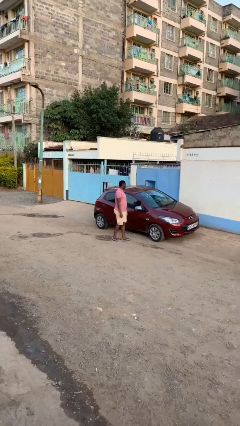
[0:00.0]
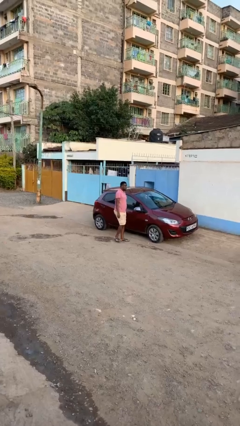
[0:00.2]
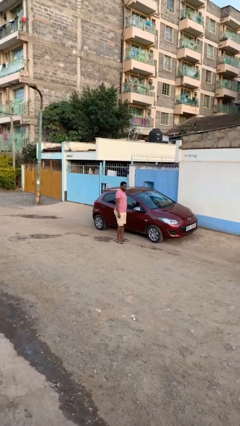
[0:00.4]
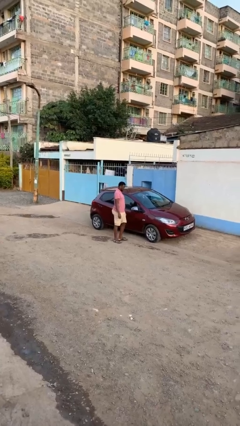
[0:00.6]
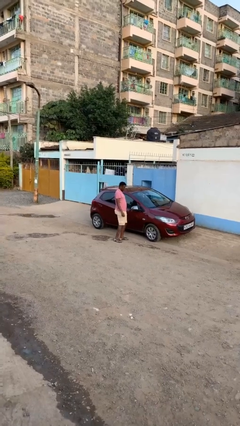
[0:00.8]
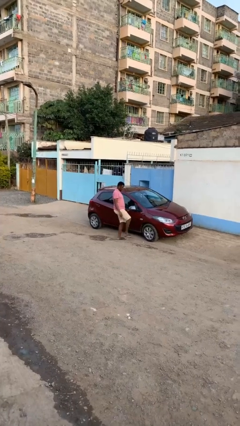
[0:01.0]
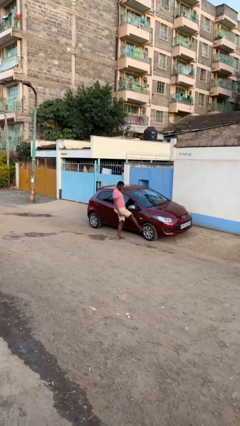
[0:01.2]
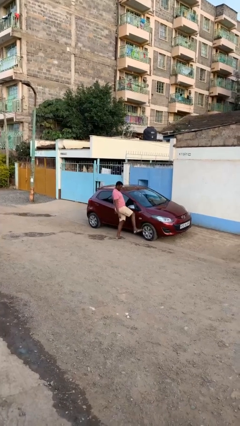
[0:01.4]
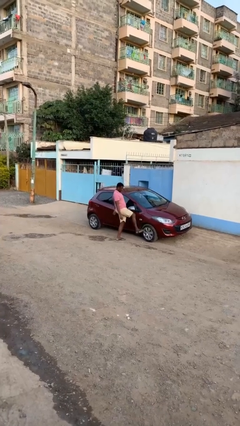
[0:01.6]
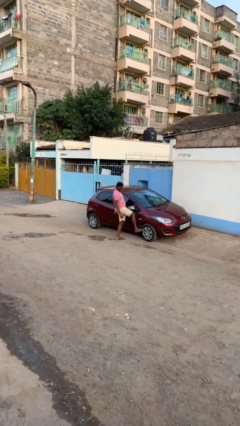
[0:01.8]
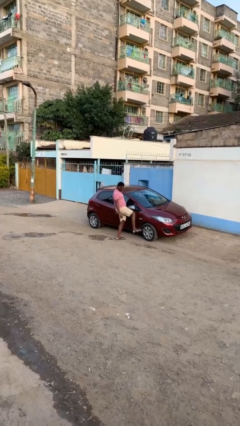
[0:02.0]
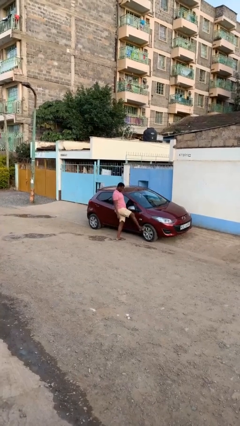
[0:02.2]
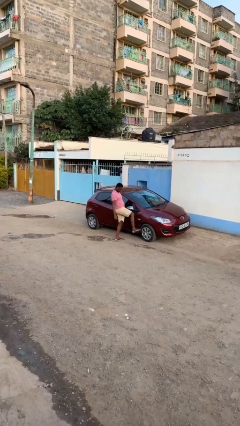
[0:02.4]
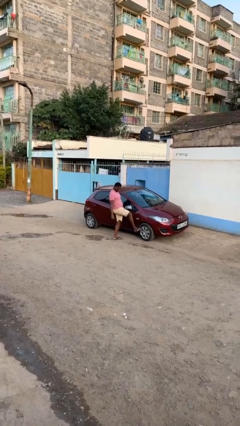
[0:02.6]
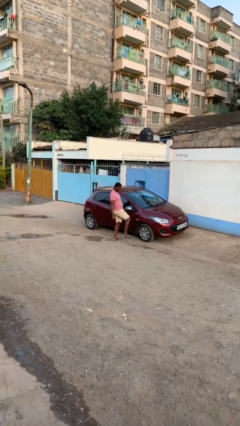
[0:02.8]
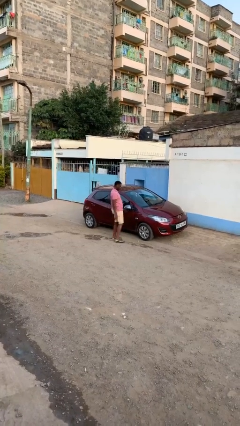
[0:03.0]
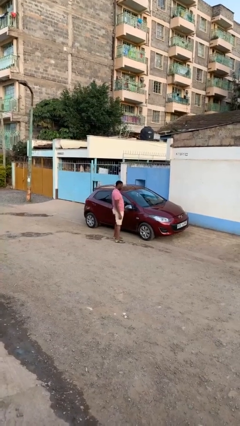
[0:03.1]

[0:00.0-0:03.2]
person kicks car tires

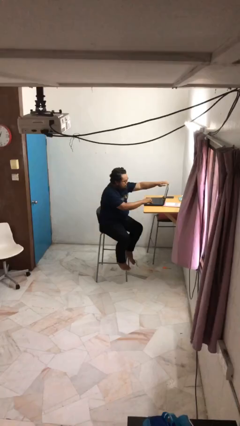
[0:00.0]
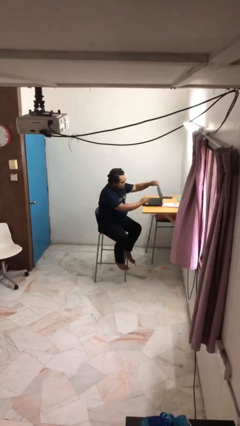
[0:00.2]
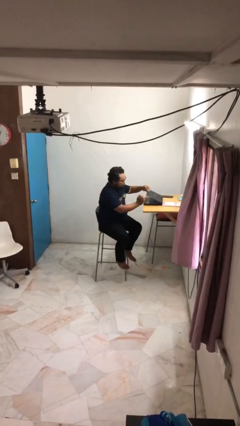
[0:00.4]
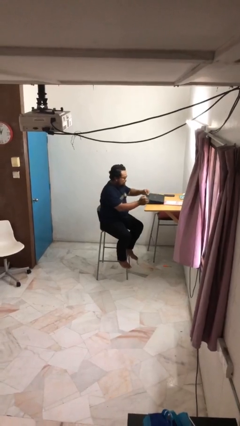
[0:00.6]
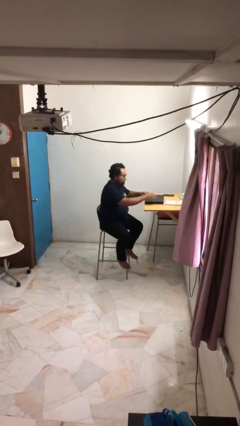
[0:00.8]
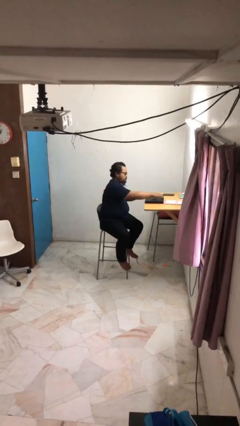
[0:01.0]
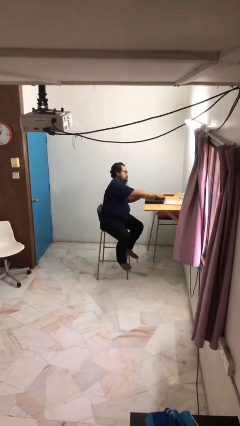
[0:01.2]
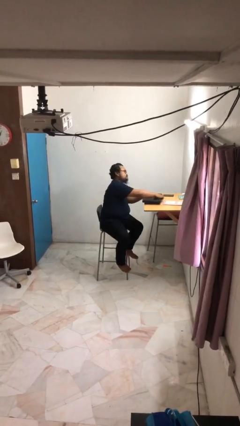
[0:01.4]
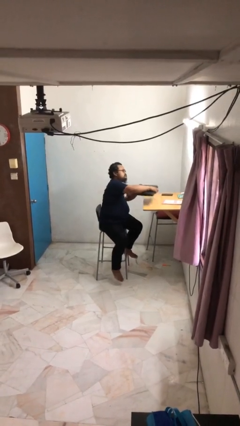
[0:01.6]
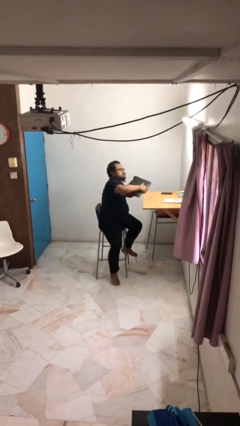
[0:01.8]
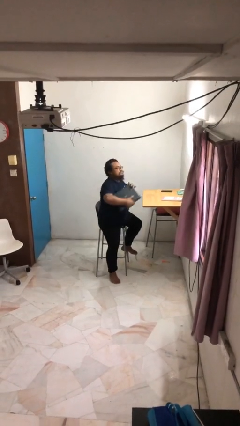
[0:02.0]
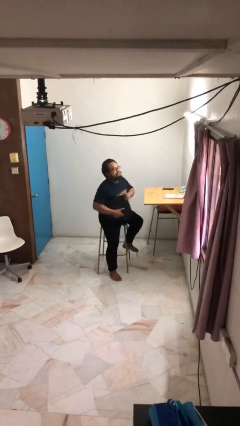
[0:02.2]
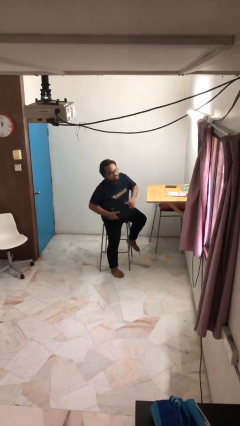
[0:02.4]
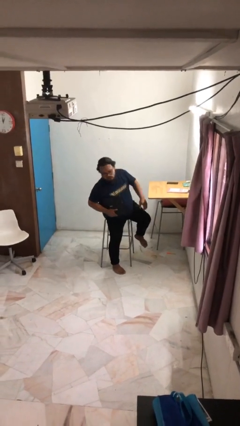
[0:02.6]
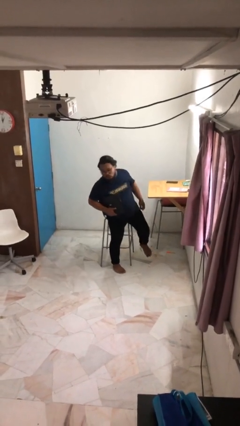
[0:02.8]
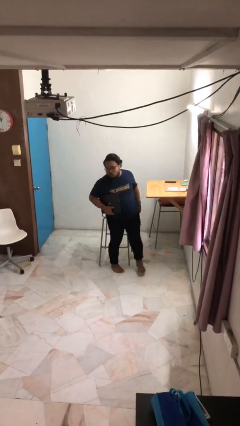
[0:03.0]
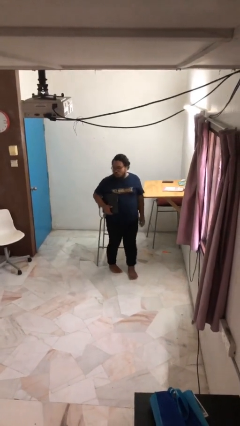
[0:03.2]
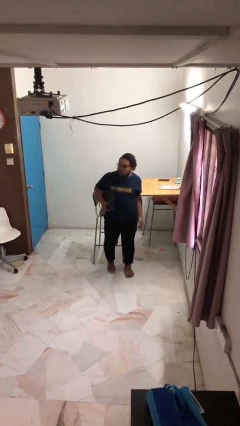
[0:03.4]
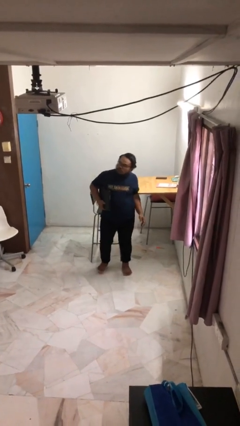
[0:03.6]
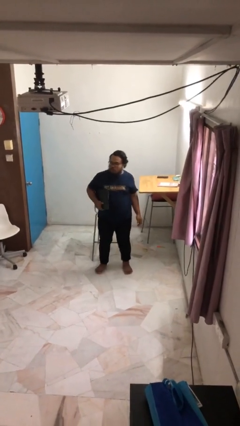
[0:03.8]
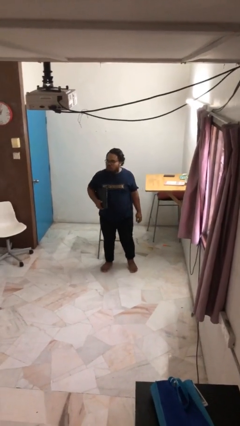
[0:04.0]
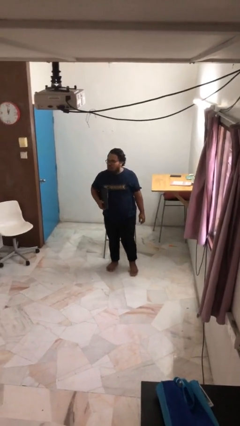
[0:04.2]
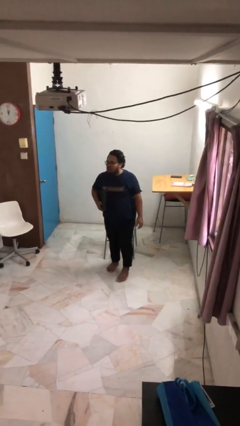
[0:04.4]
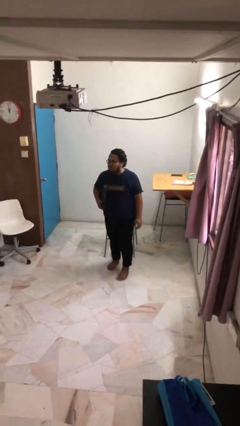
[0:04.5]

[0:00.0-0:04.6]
person stands up

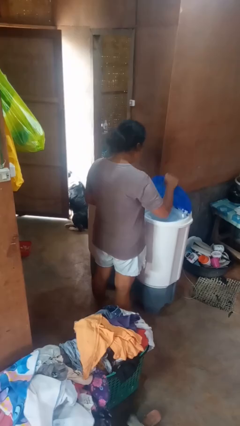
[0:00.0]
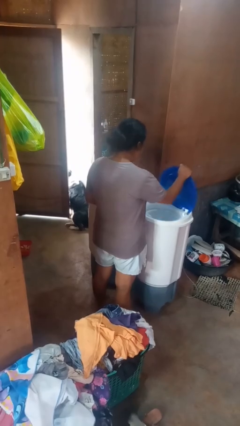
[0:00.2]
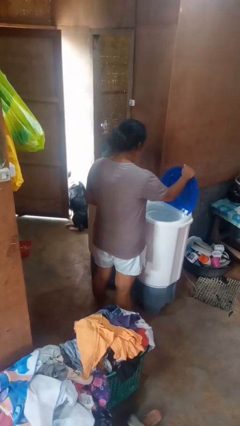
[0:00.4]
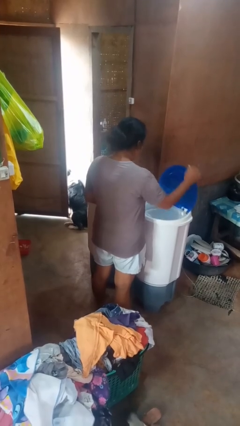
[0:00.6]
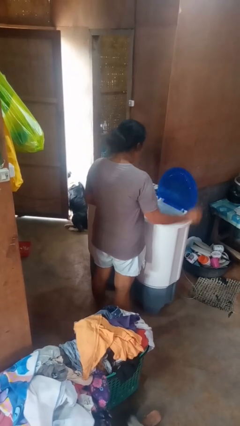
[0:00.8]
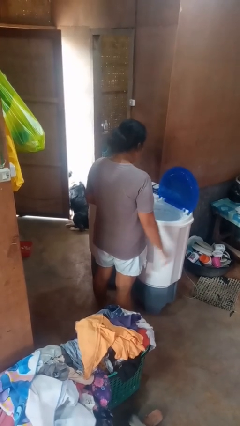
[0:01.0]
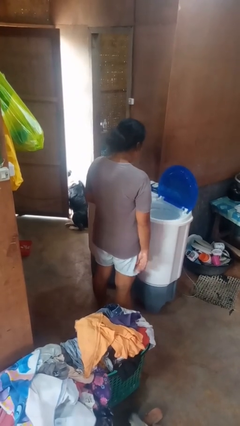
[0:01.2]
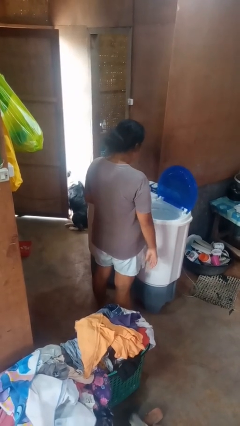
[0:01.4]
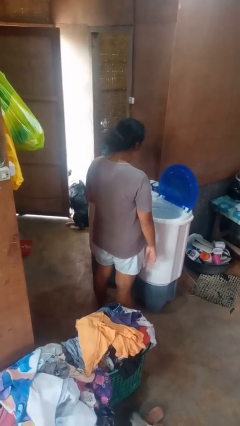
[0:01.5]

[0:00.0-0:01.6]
person opens clothes washer

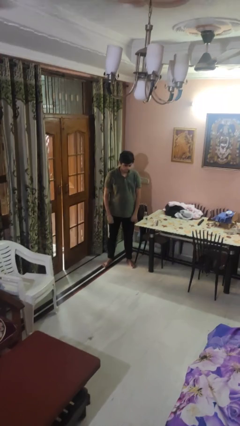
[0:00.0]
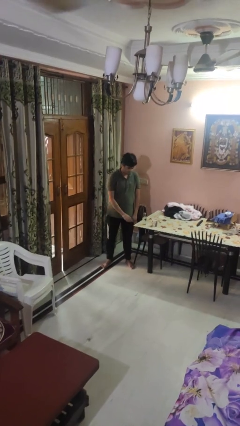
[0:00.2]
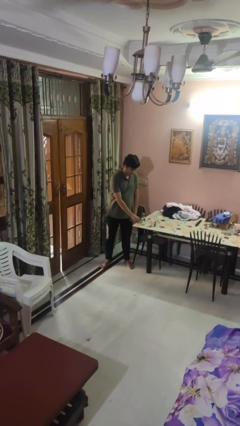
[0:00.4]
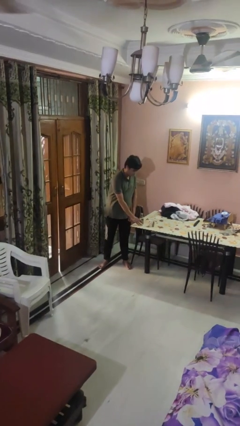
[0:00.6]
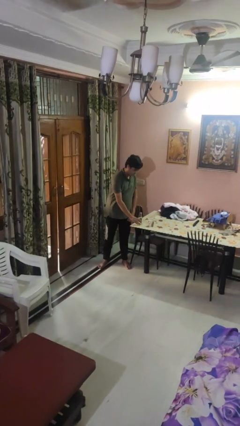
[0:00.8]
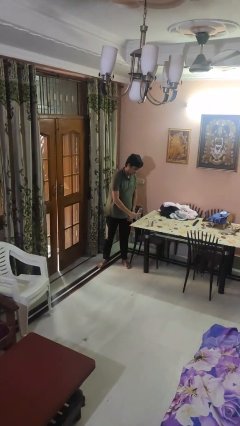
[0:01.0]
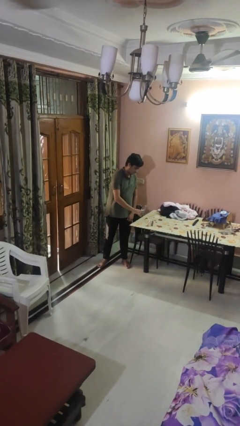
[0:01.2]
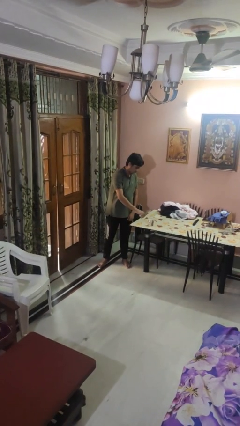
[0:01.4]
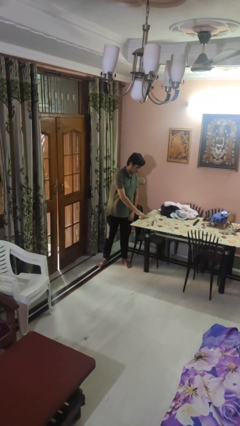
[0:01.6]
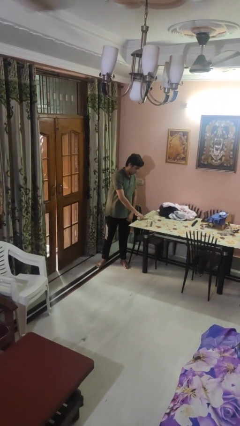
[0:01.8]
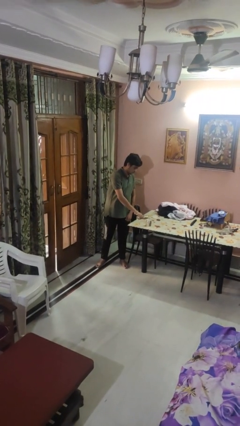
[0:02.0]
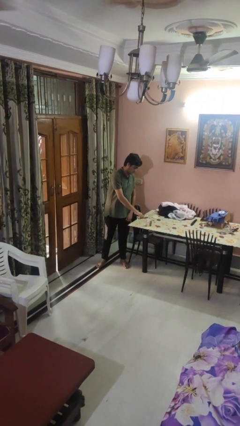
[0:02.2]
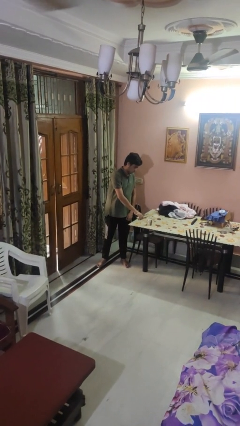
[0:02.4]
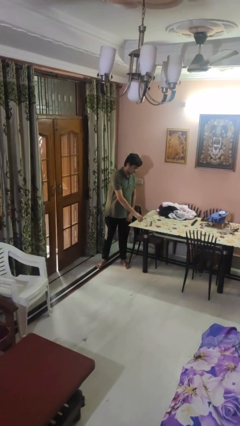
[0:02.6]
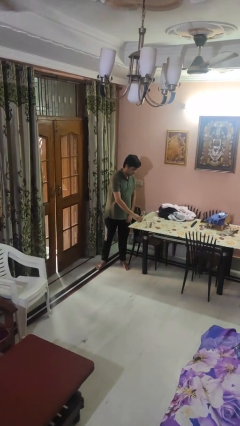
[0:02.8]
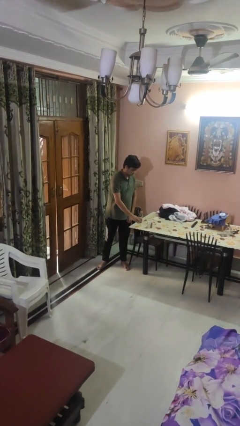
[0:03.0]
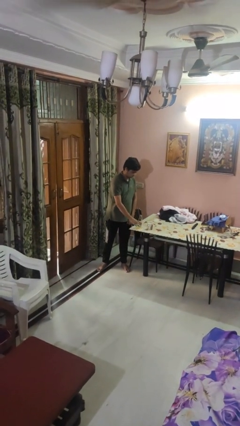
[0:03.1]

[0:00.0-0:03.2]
person pours liquid into cup

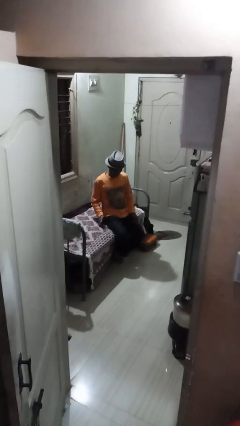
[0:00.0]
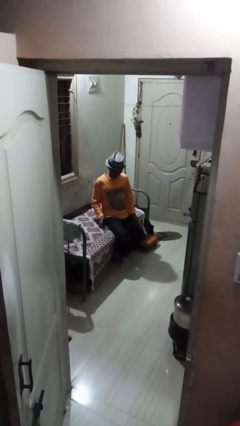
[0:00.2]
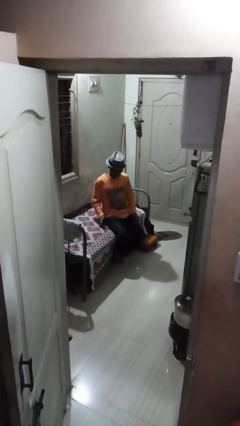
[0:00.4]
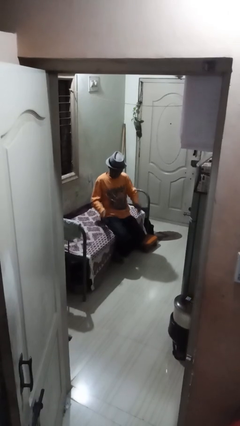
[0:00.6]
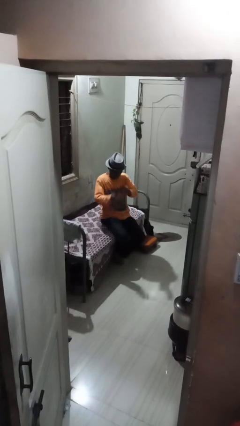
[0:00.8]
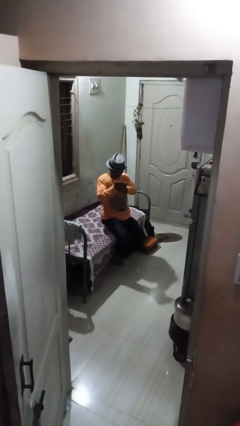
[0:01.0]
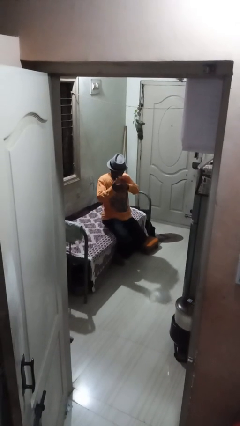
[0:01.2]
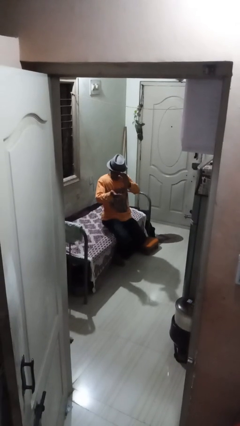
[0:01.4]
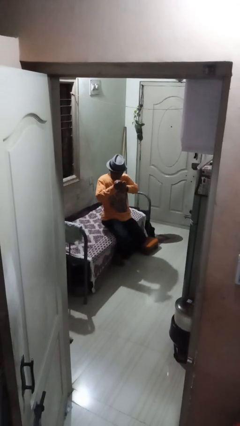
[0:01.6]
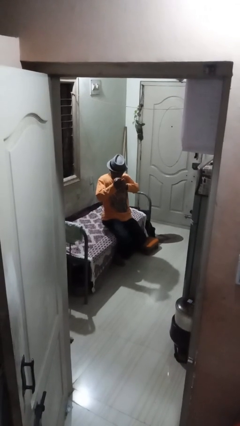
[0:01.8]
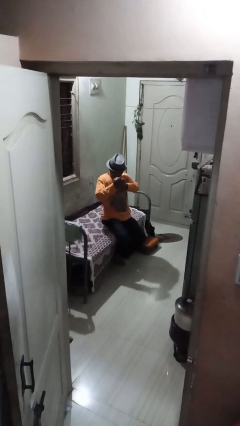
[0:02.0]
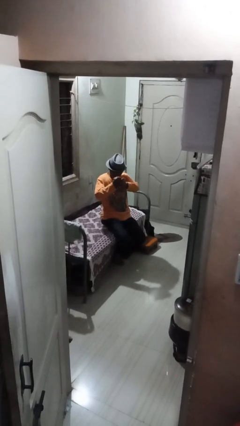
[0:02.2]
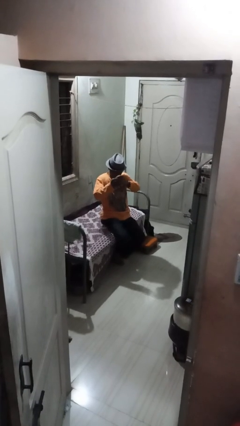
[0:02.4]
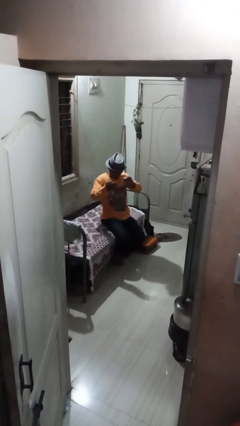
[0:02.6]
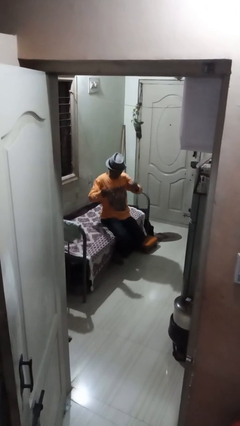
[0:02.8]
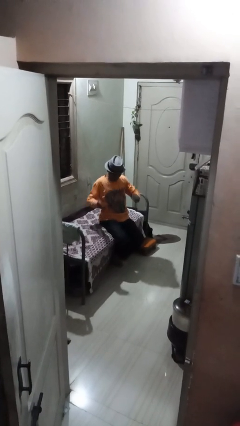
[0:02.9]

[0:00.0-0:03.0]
person claps hands

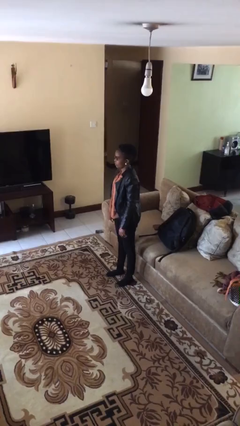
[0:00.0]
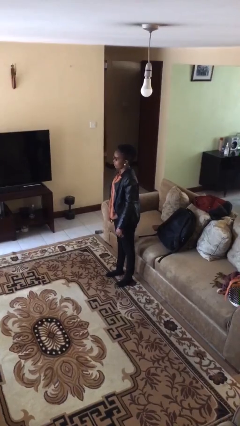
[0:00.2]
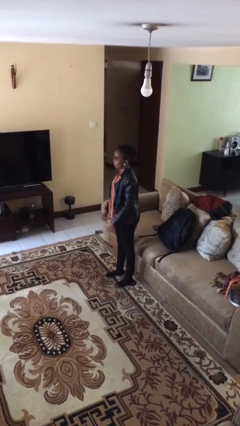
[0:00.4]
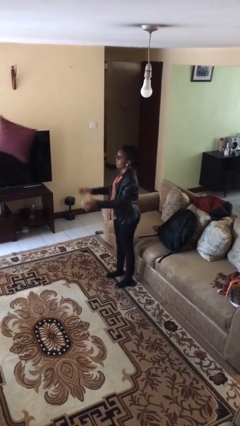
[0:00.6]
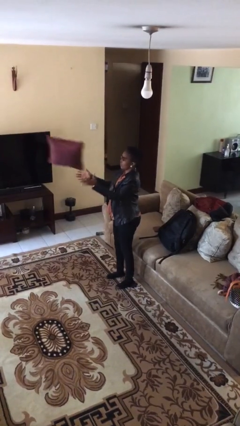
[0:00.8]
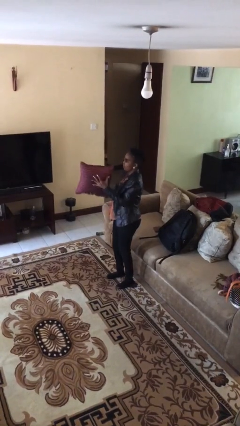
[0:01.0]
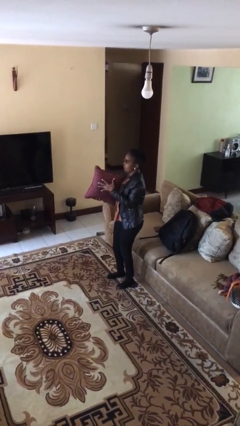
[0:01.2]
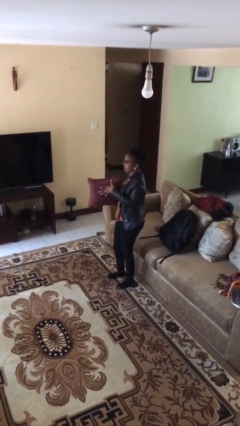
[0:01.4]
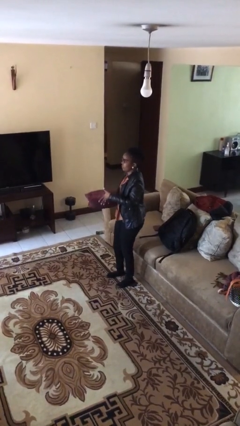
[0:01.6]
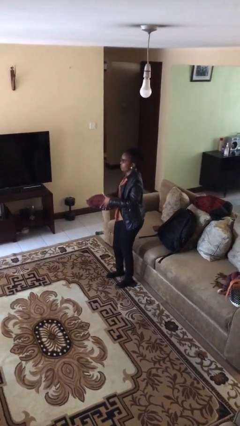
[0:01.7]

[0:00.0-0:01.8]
person catches object from person
